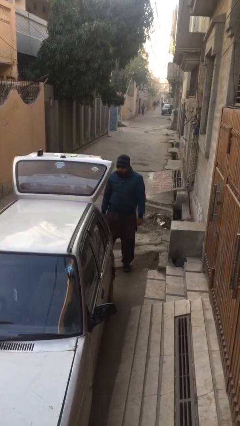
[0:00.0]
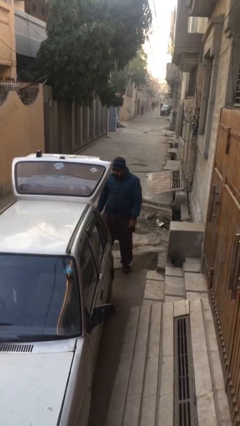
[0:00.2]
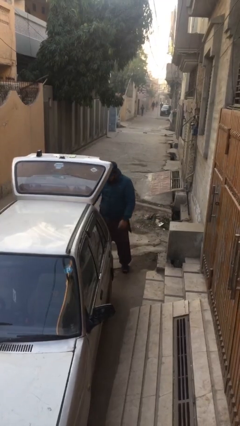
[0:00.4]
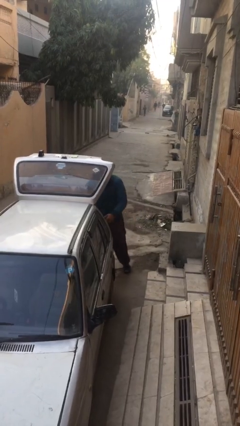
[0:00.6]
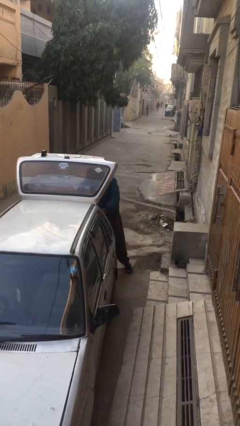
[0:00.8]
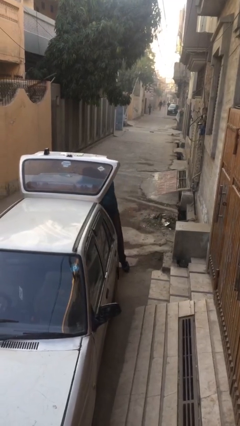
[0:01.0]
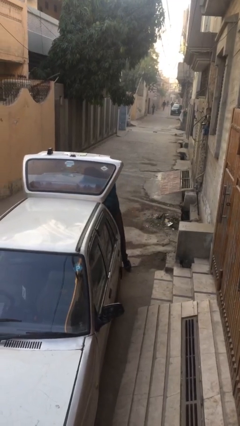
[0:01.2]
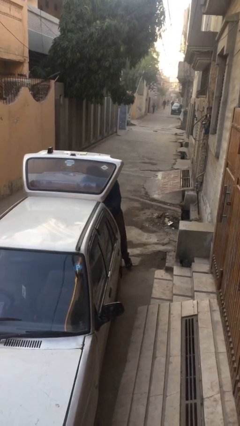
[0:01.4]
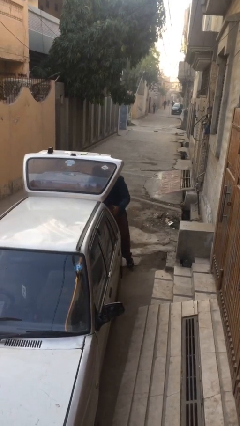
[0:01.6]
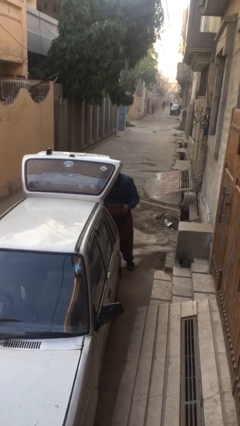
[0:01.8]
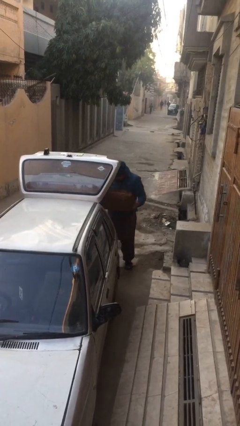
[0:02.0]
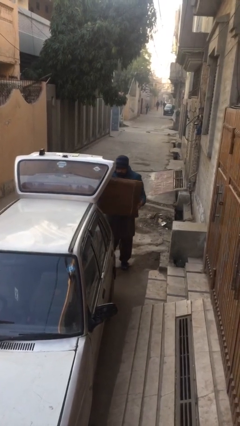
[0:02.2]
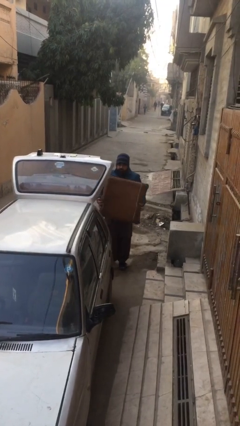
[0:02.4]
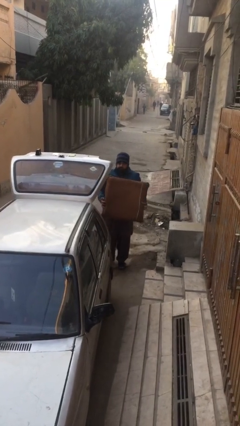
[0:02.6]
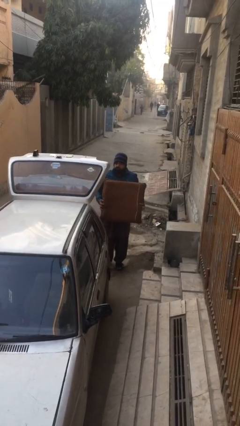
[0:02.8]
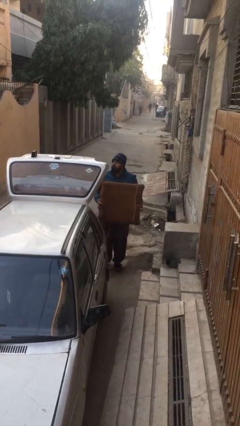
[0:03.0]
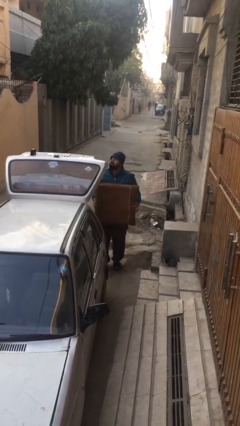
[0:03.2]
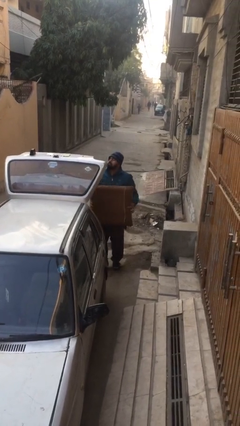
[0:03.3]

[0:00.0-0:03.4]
person unloads car

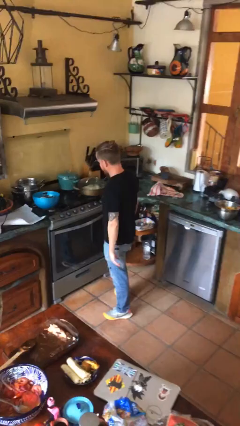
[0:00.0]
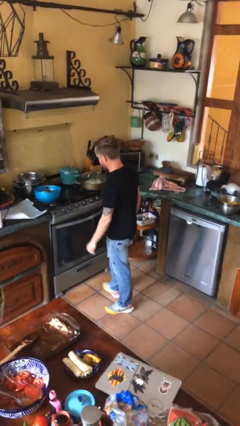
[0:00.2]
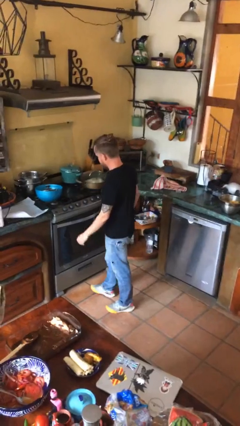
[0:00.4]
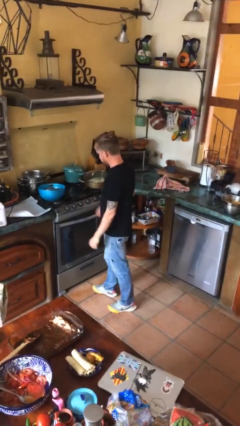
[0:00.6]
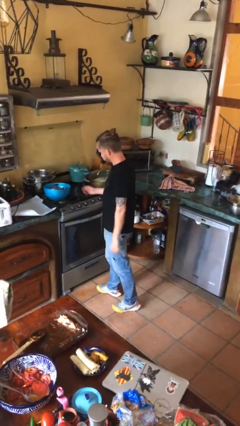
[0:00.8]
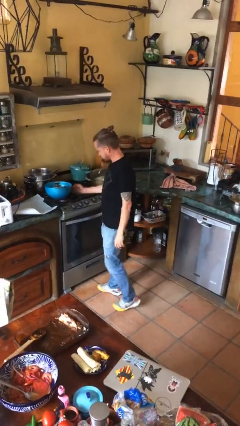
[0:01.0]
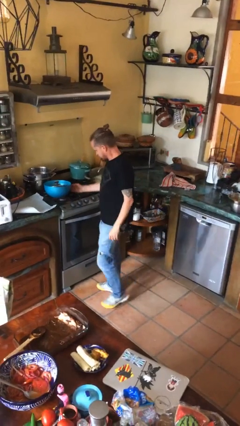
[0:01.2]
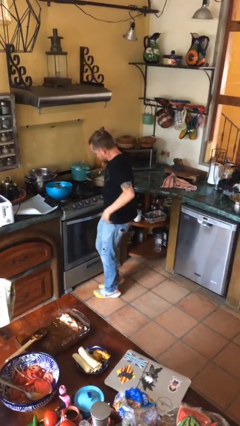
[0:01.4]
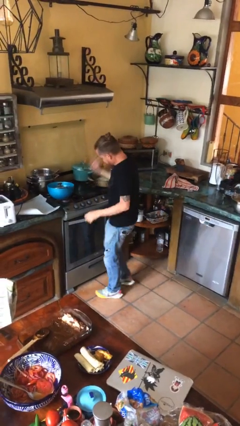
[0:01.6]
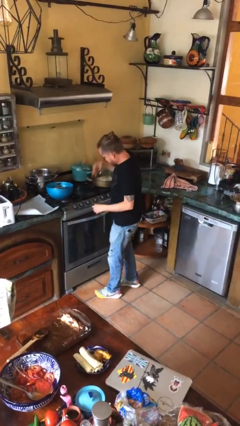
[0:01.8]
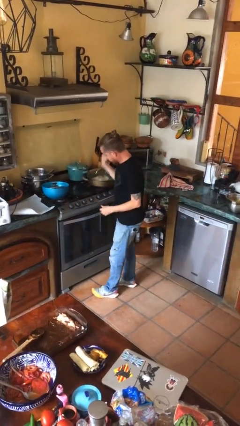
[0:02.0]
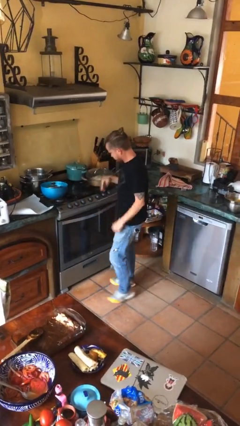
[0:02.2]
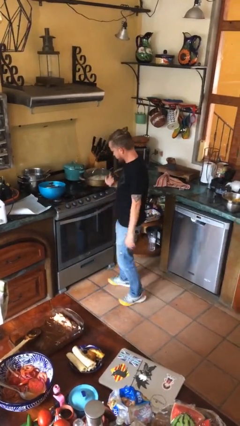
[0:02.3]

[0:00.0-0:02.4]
person burns hand

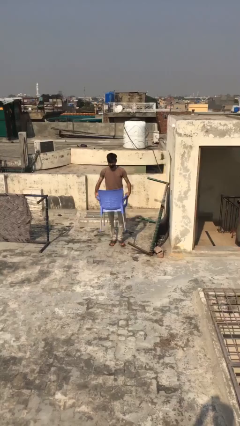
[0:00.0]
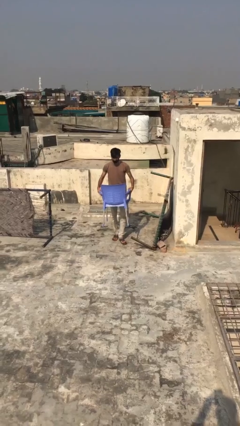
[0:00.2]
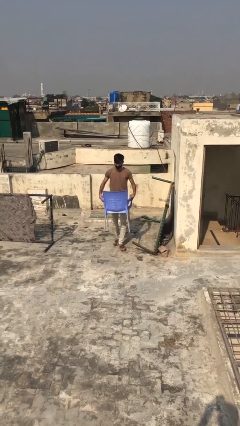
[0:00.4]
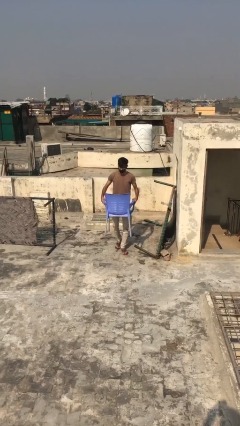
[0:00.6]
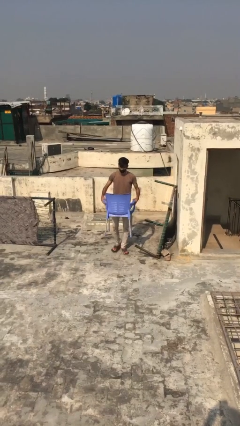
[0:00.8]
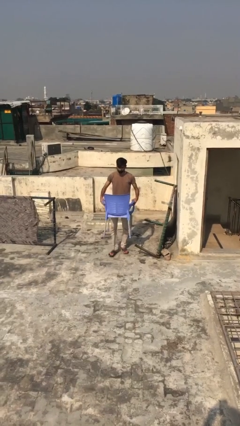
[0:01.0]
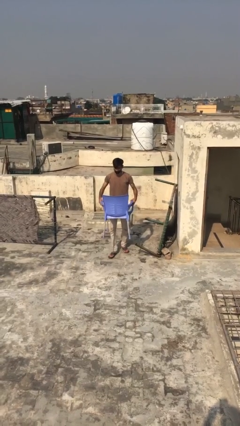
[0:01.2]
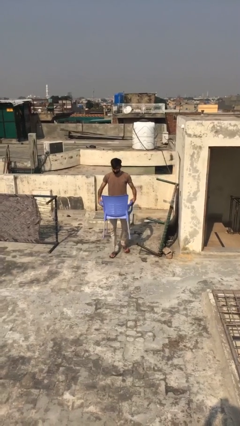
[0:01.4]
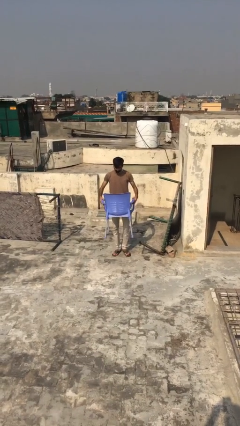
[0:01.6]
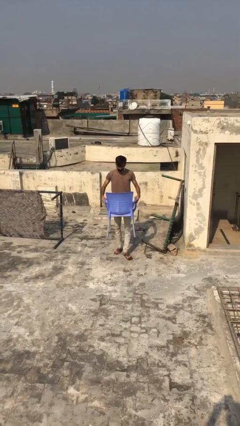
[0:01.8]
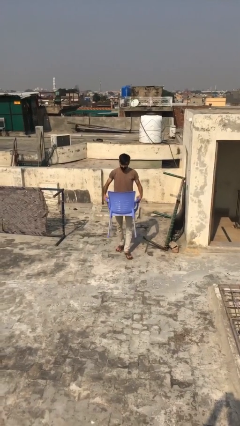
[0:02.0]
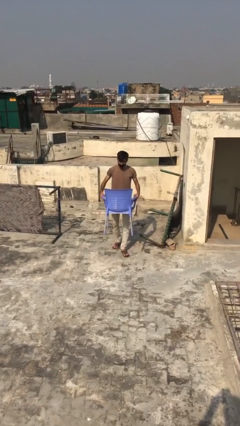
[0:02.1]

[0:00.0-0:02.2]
person carries heavy object

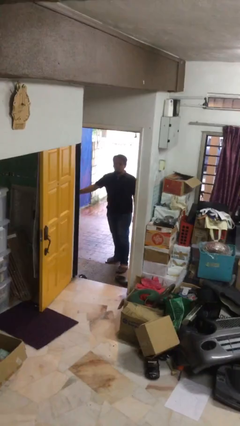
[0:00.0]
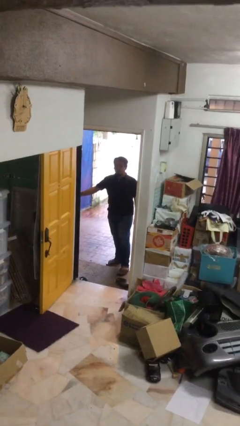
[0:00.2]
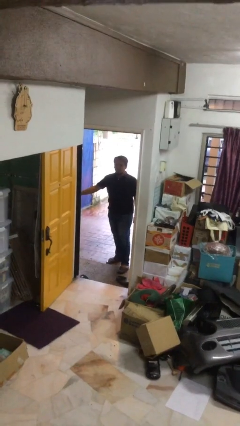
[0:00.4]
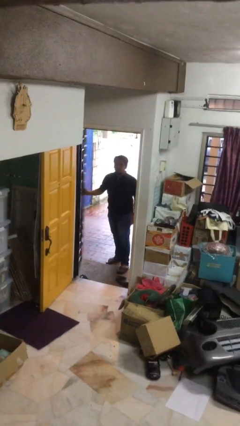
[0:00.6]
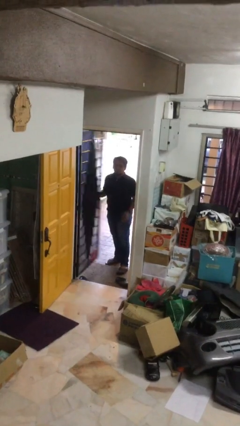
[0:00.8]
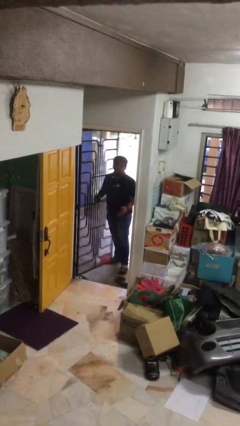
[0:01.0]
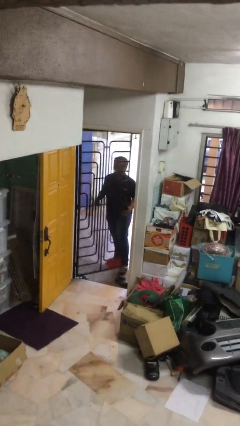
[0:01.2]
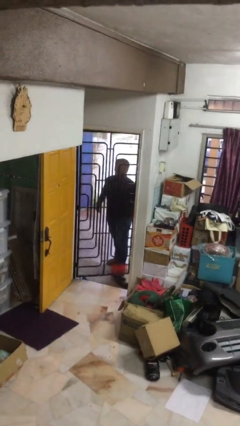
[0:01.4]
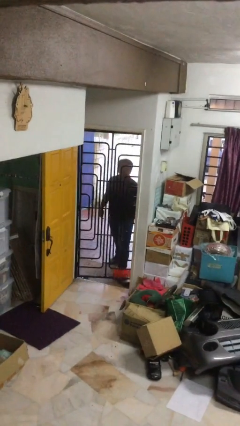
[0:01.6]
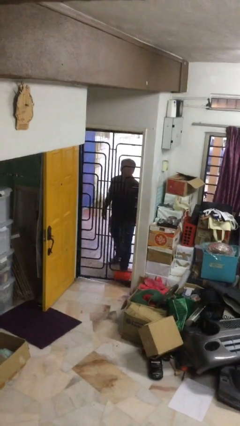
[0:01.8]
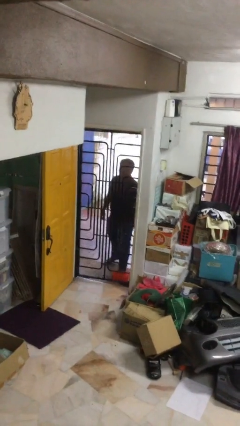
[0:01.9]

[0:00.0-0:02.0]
person closes facility door

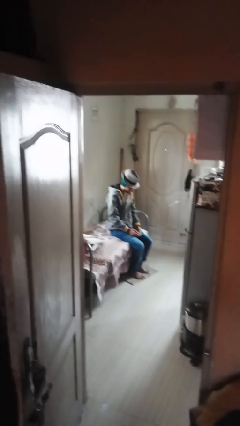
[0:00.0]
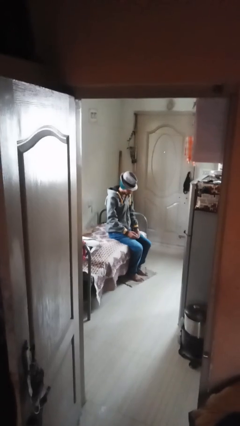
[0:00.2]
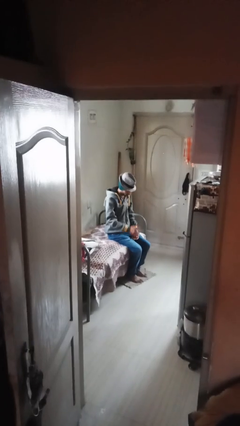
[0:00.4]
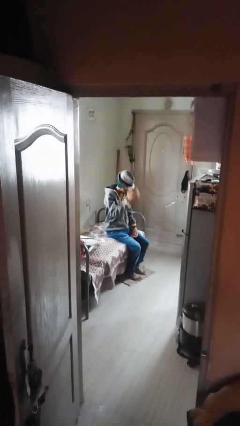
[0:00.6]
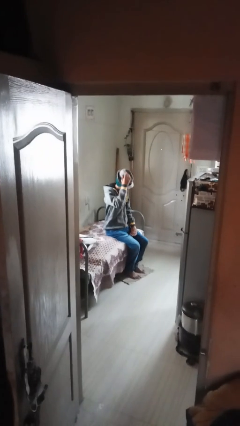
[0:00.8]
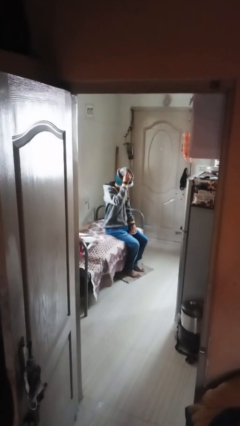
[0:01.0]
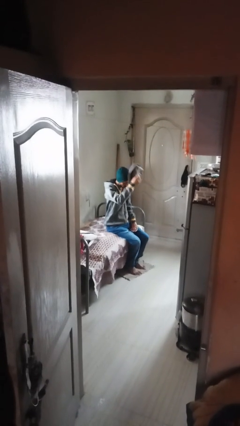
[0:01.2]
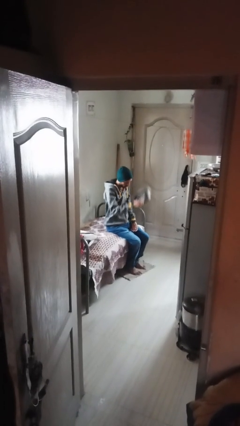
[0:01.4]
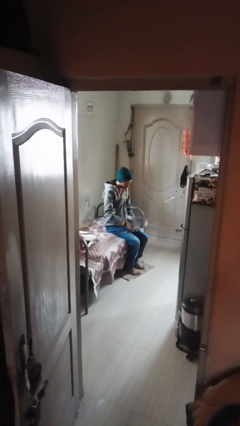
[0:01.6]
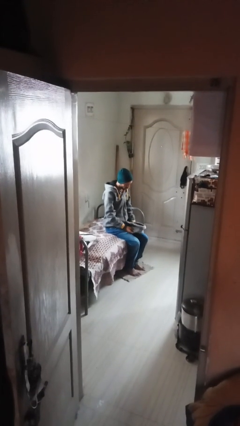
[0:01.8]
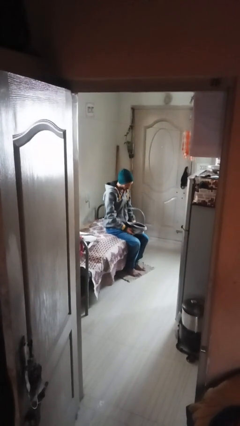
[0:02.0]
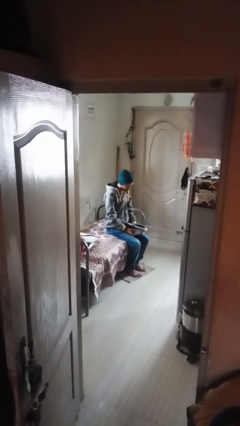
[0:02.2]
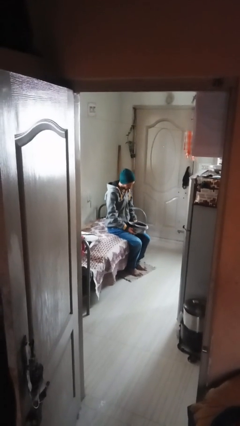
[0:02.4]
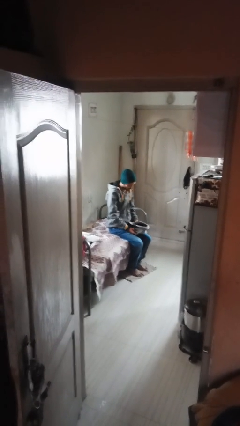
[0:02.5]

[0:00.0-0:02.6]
person takes off hat

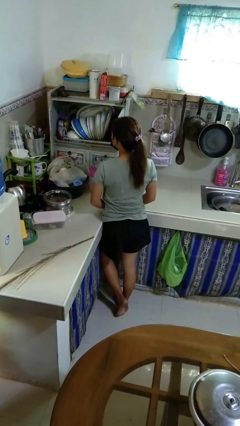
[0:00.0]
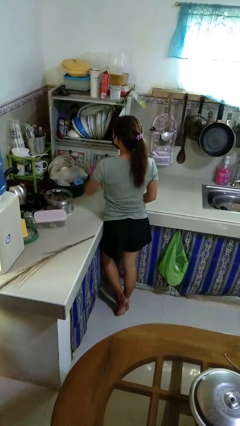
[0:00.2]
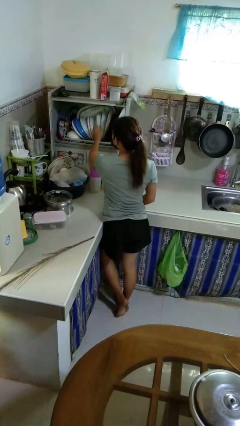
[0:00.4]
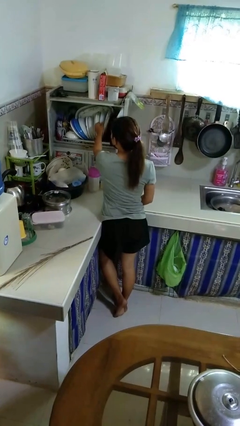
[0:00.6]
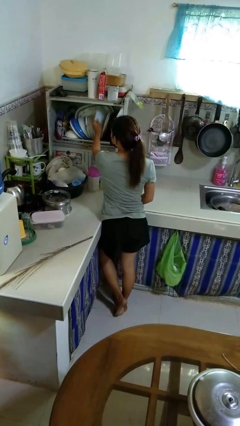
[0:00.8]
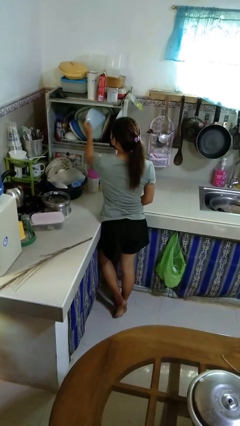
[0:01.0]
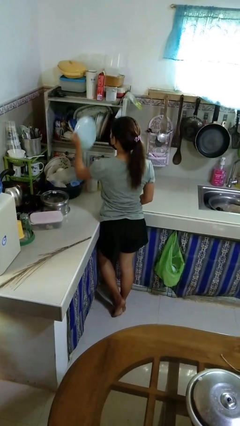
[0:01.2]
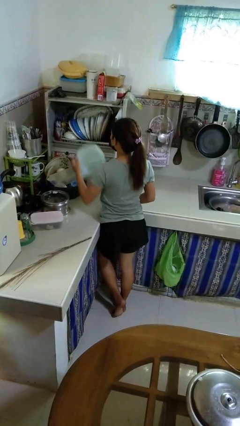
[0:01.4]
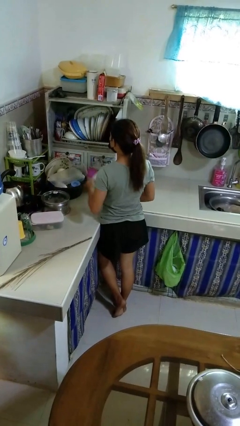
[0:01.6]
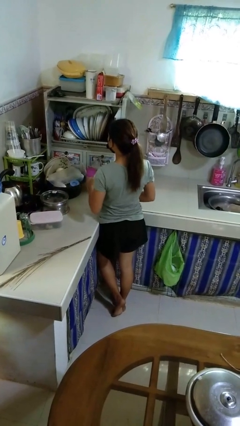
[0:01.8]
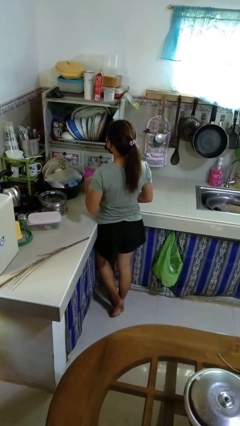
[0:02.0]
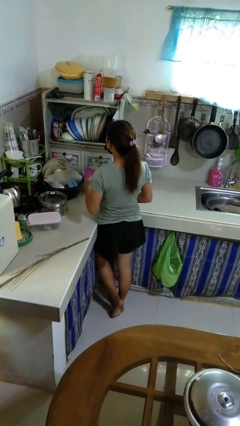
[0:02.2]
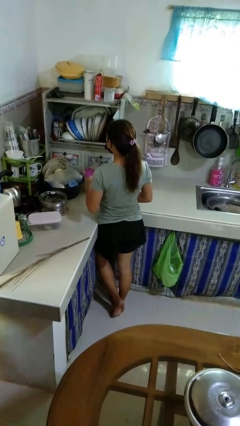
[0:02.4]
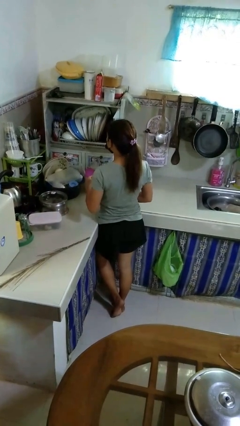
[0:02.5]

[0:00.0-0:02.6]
person takes object from kitchen drawer

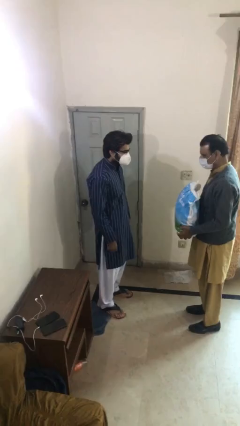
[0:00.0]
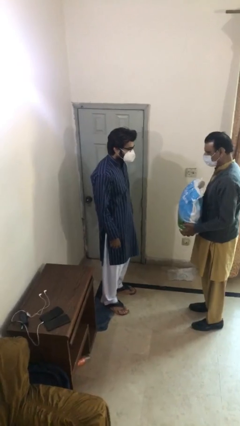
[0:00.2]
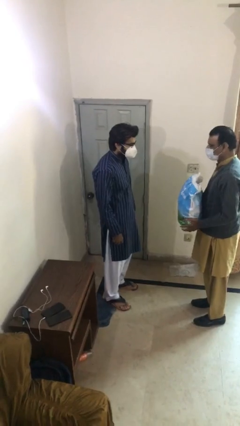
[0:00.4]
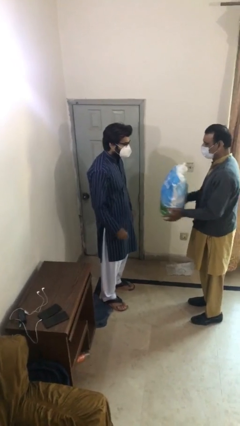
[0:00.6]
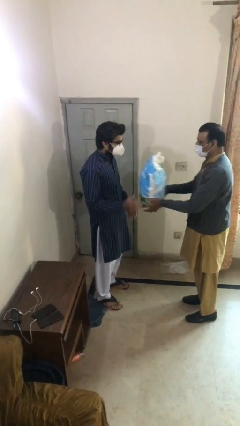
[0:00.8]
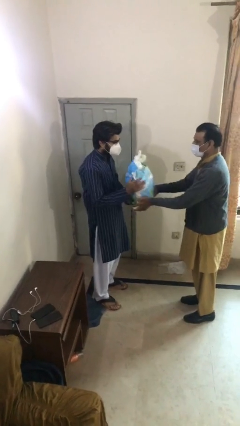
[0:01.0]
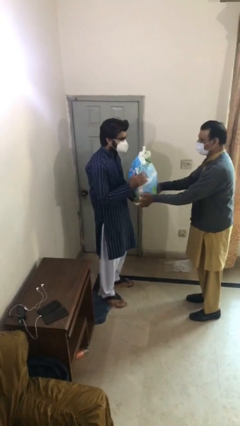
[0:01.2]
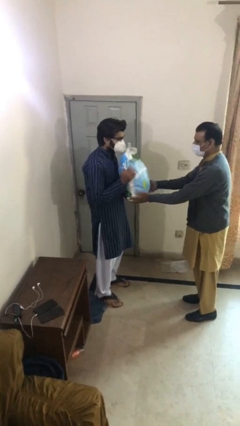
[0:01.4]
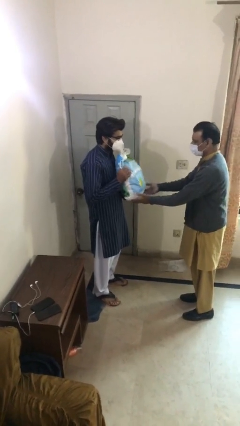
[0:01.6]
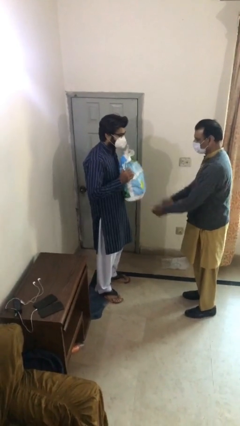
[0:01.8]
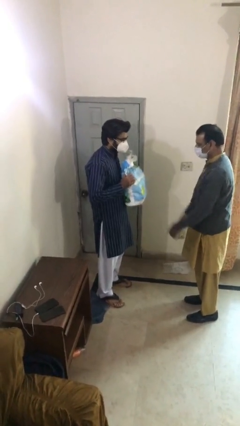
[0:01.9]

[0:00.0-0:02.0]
person transfers object to person
